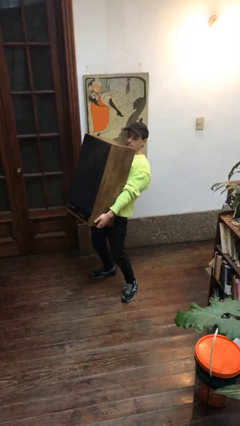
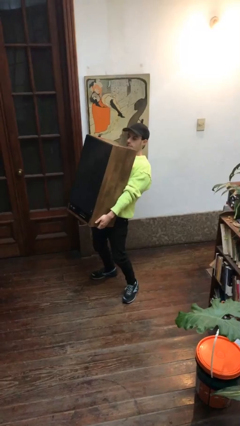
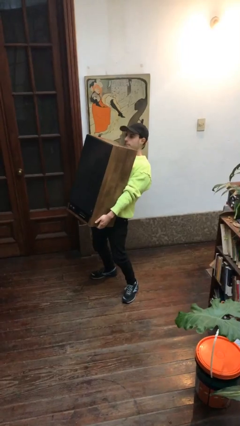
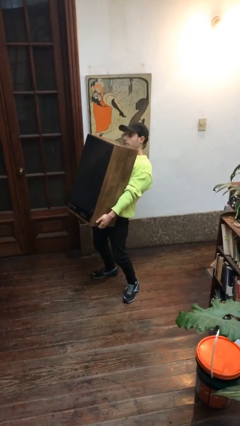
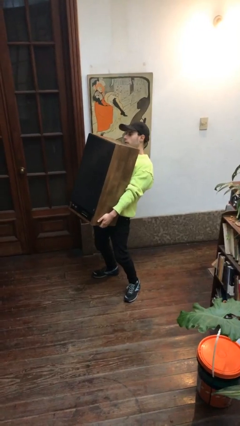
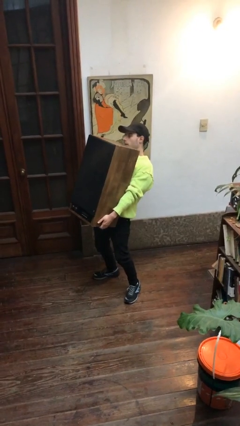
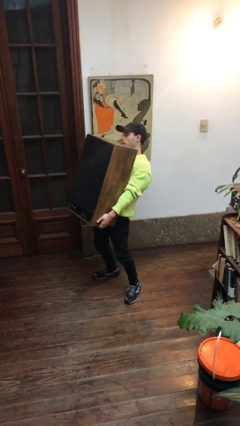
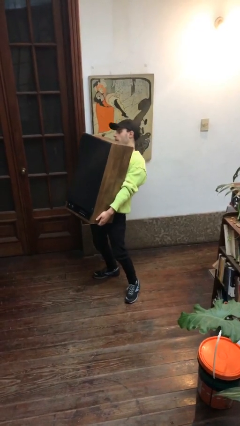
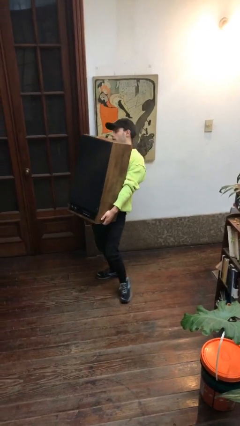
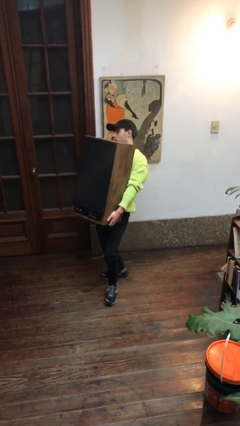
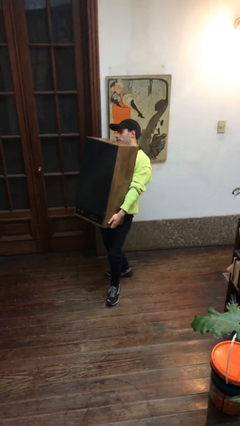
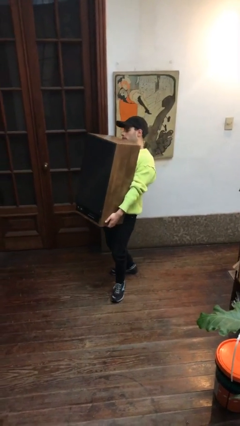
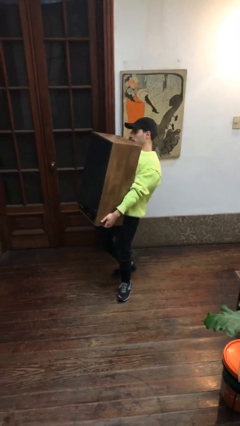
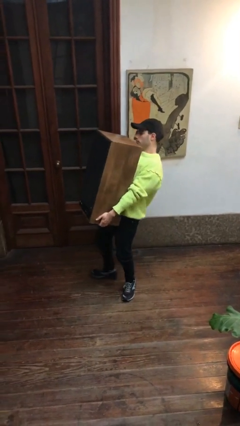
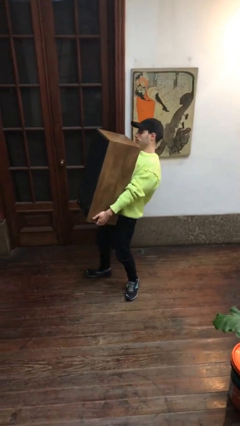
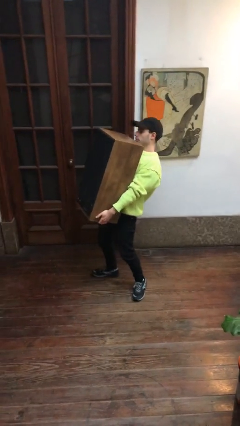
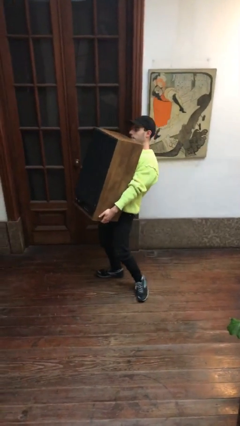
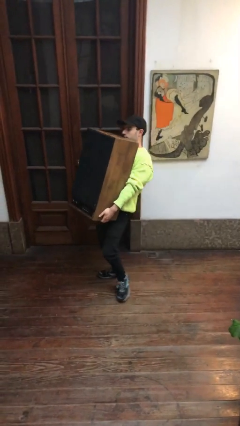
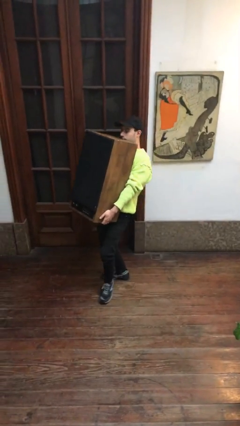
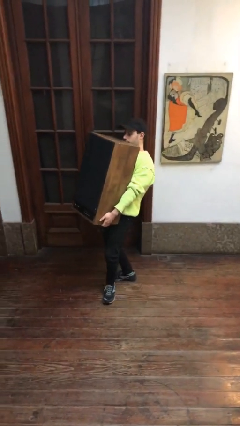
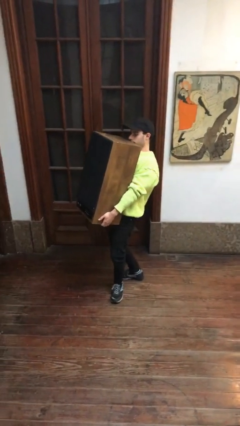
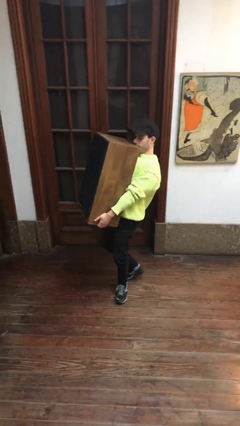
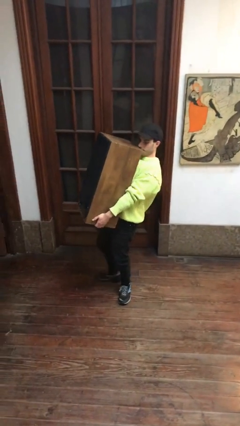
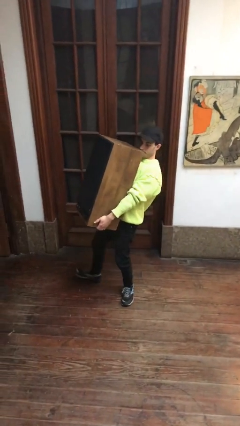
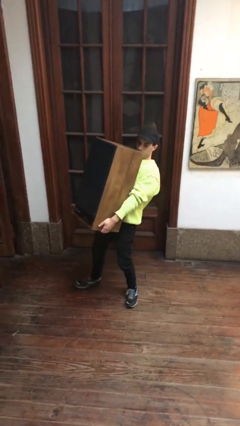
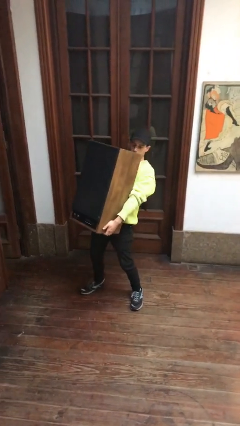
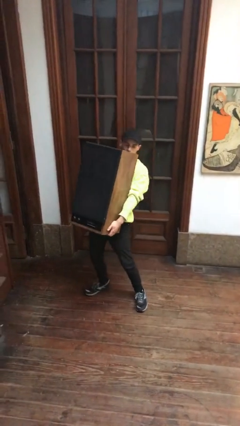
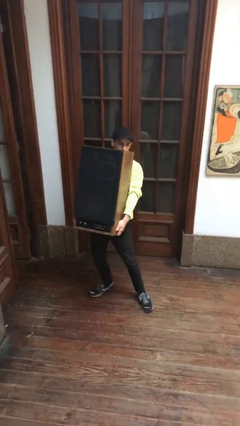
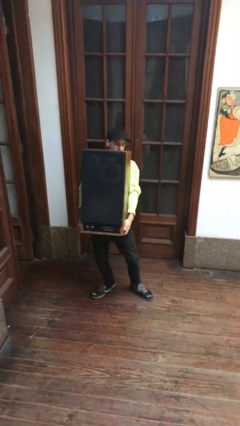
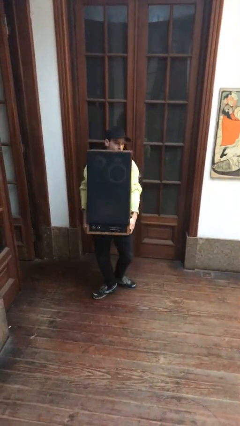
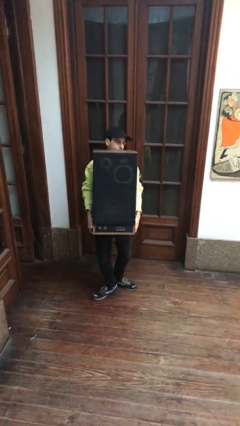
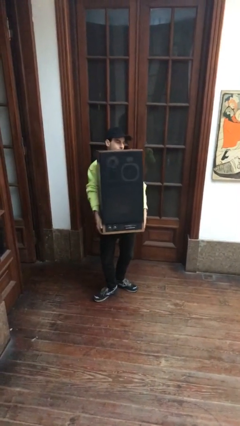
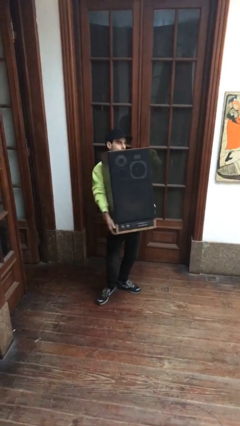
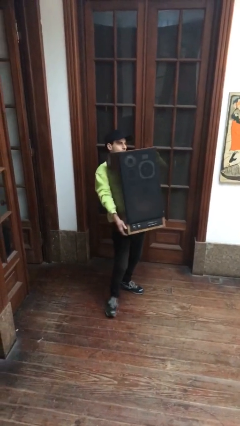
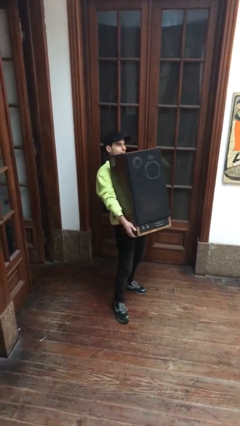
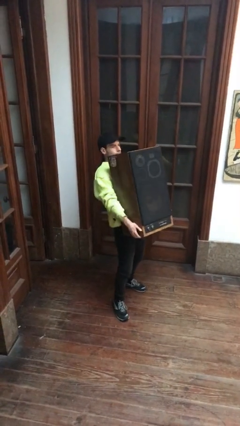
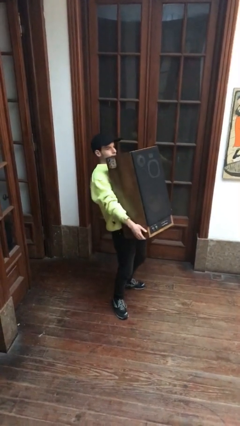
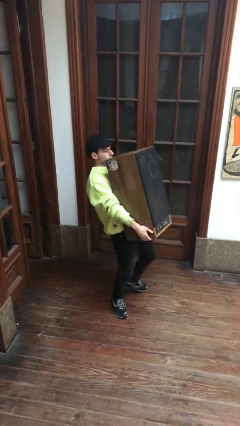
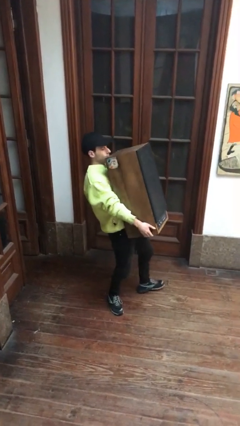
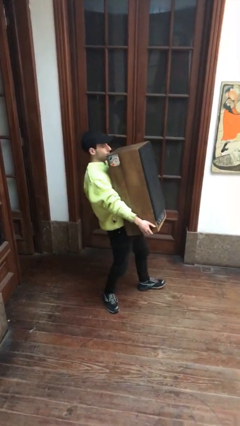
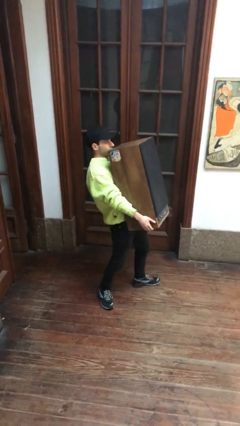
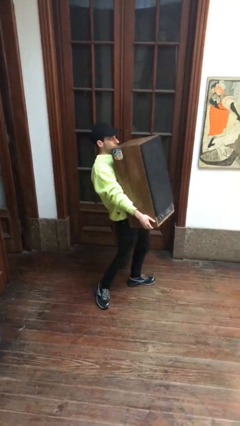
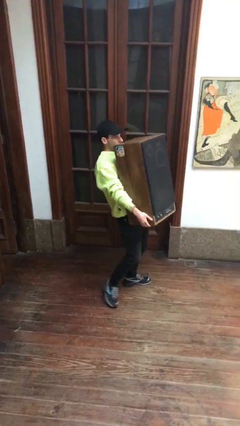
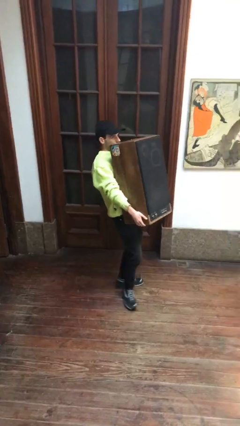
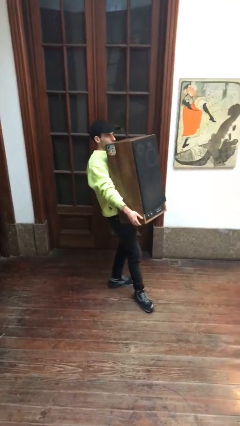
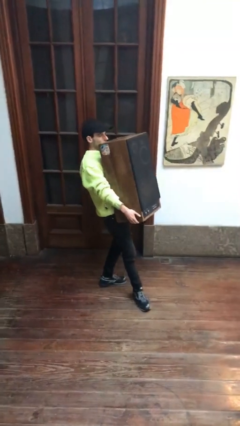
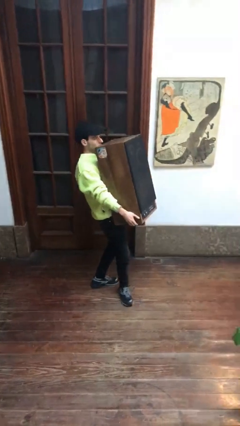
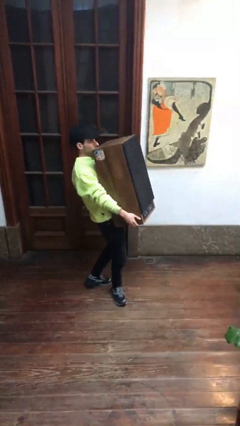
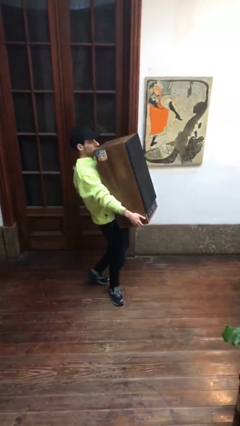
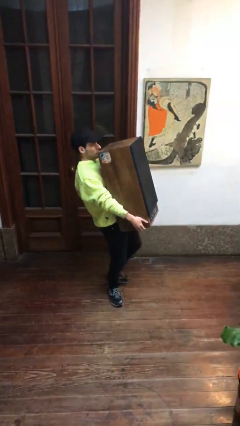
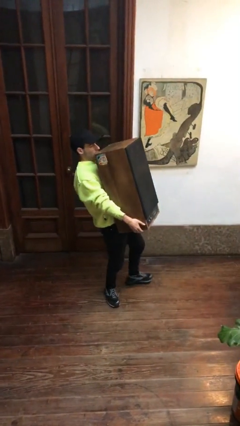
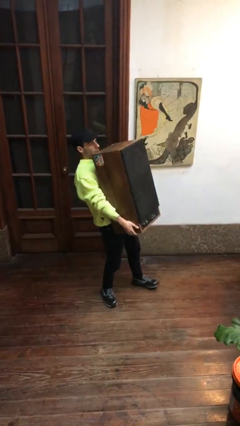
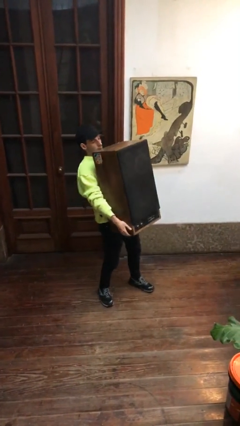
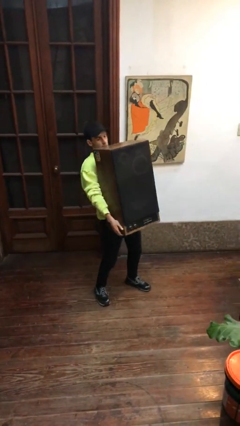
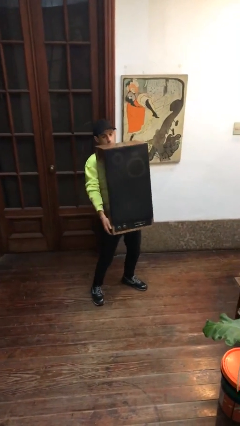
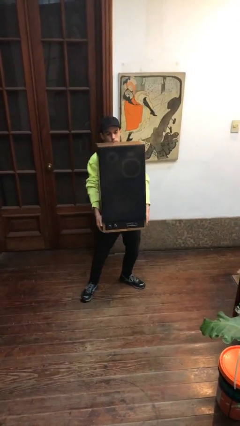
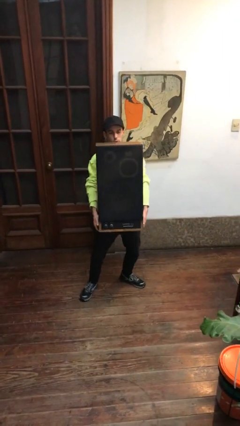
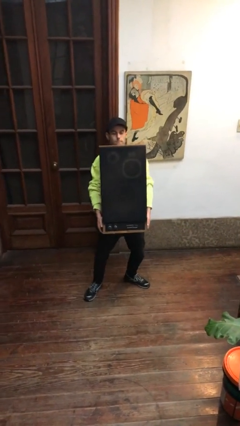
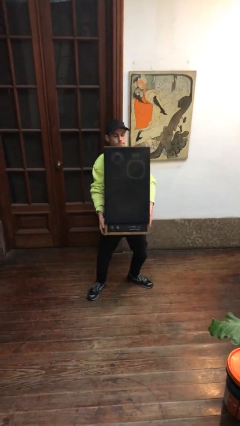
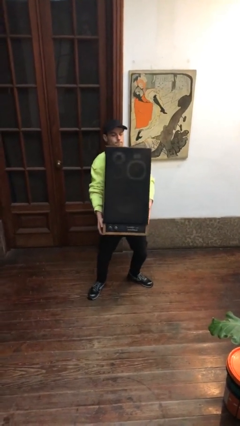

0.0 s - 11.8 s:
person carries heavy object

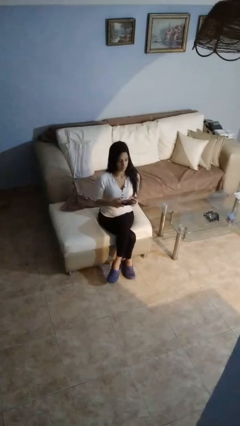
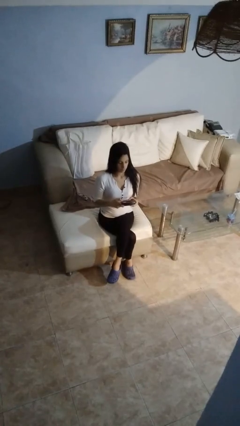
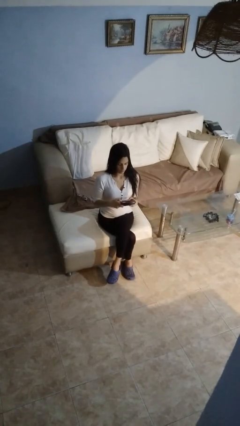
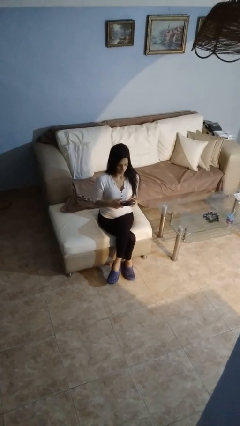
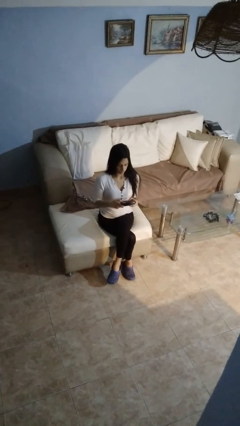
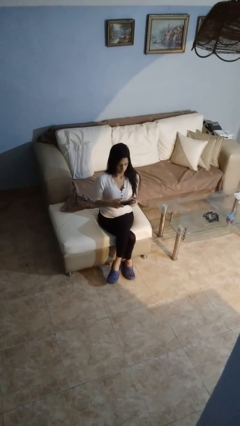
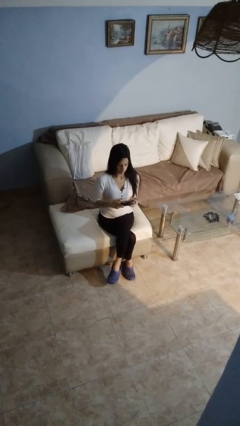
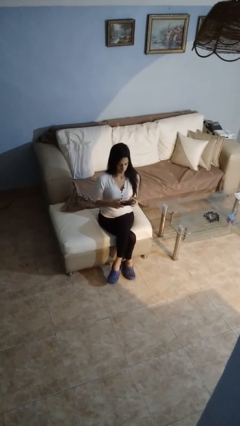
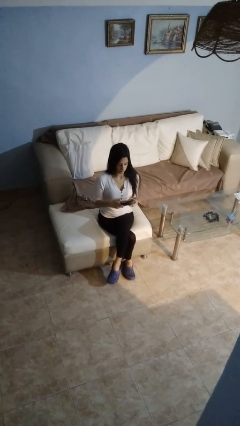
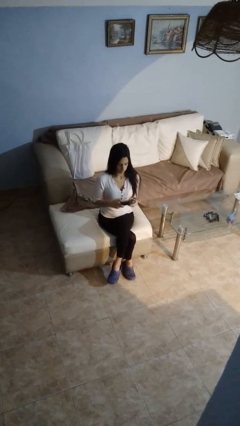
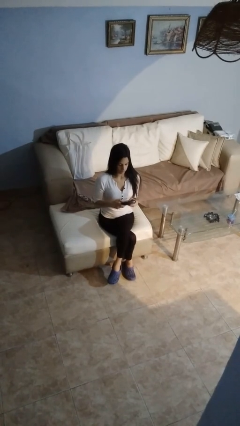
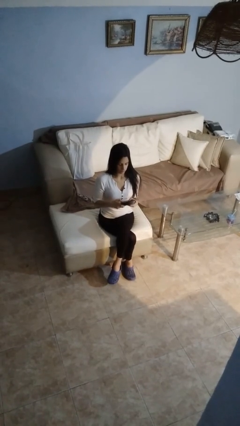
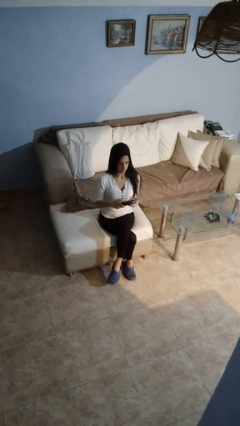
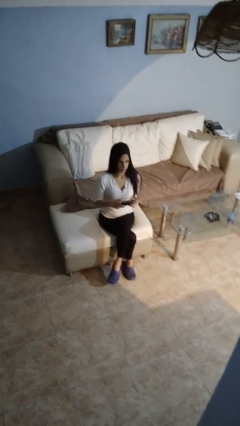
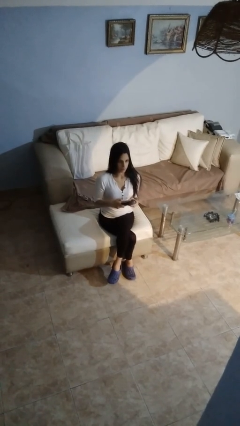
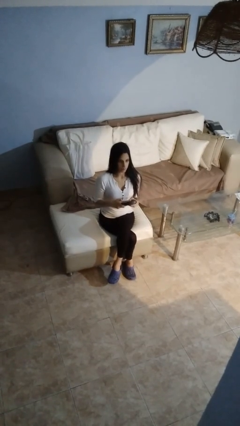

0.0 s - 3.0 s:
person interacts with handheld game

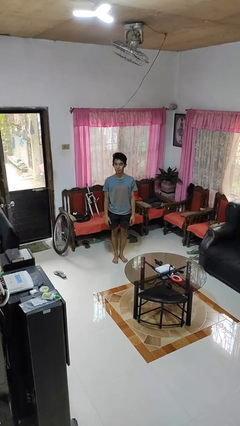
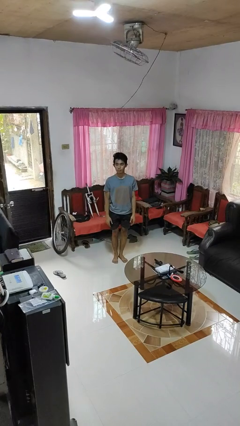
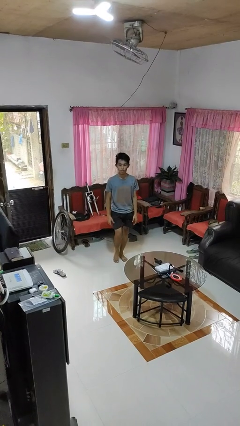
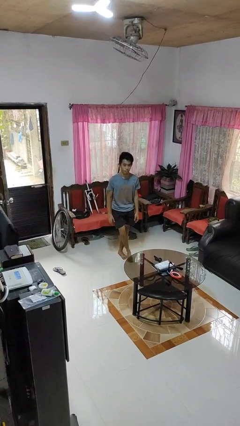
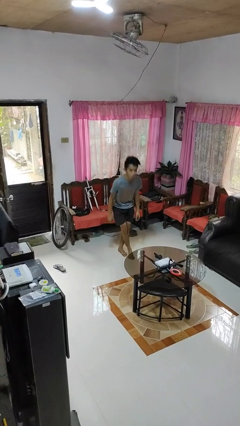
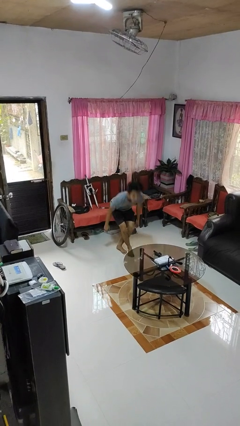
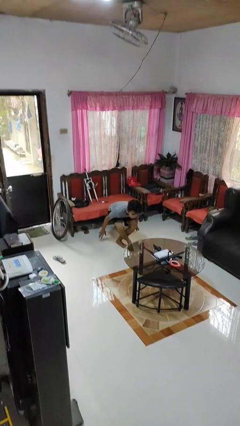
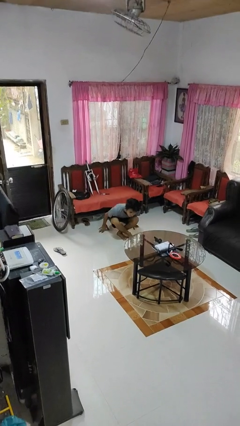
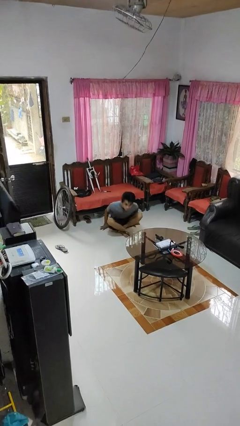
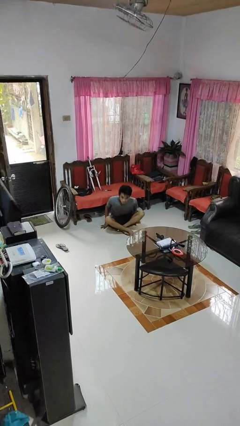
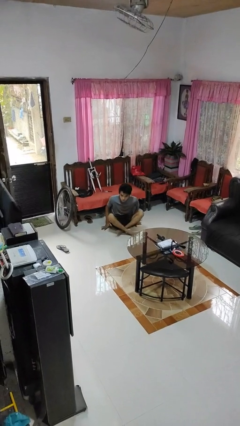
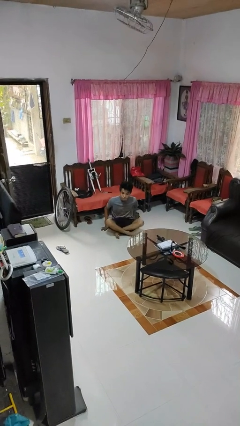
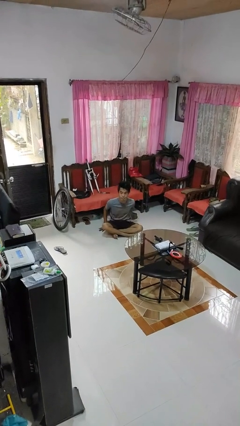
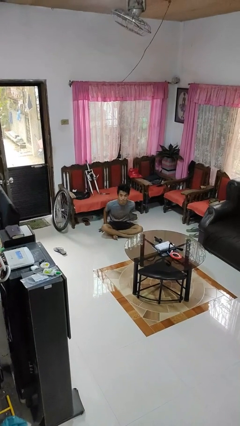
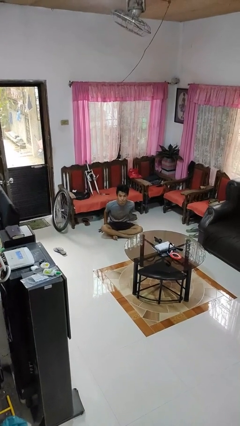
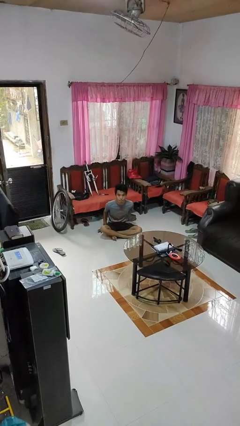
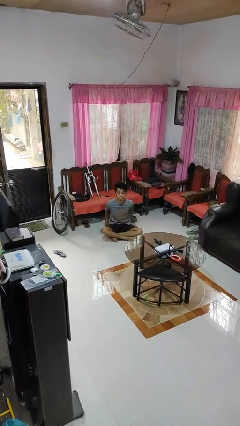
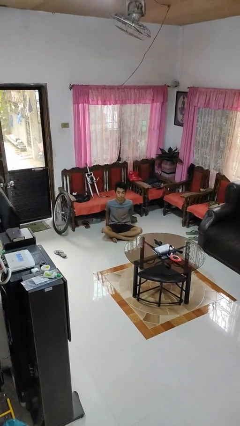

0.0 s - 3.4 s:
person sits crisscross

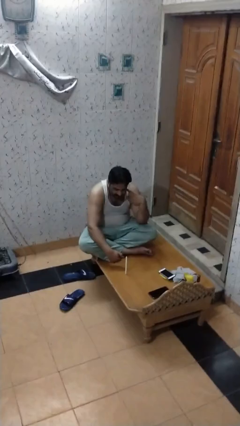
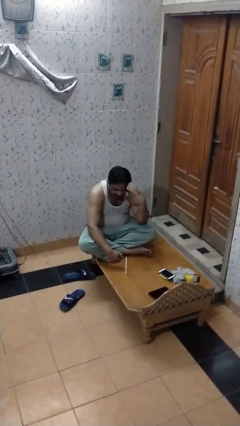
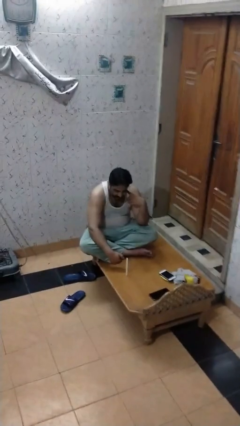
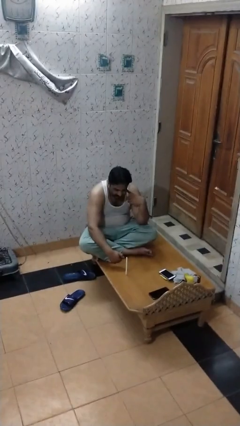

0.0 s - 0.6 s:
person extinguishes candle
